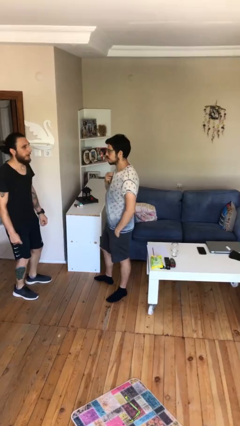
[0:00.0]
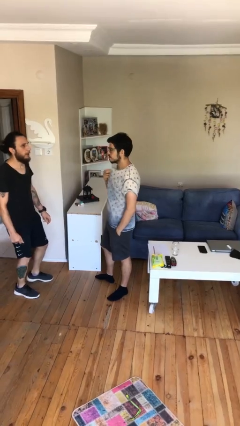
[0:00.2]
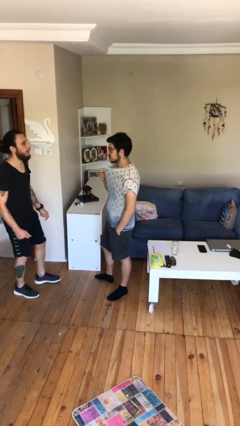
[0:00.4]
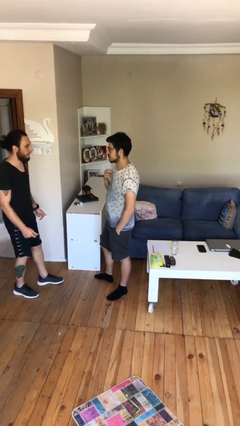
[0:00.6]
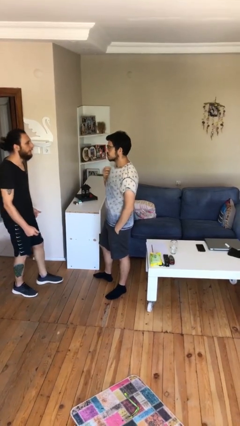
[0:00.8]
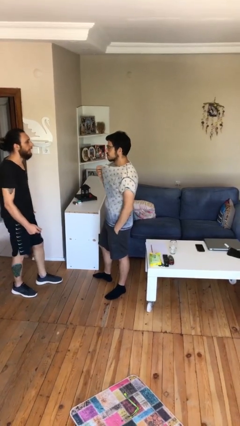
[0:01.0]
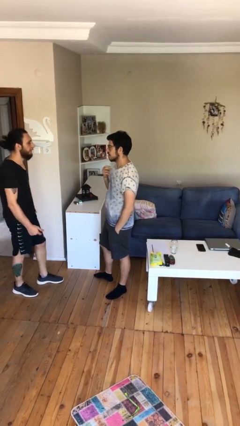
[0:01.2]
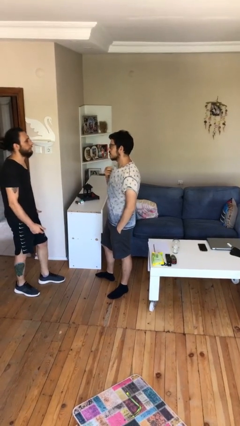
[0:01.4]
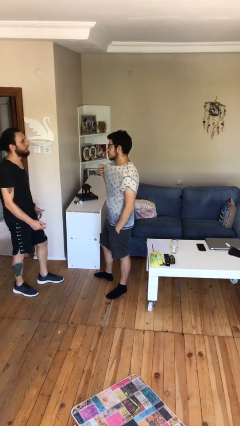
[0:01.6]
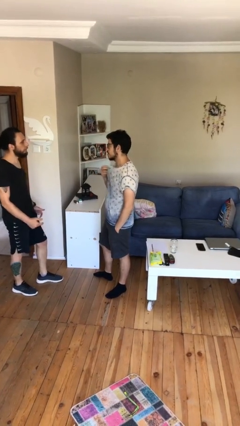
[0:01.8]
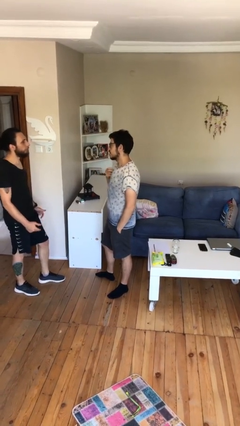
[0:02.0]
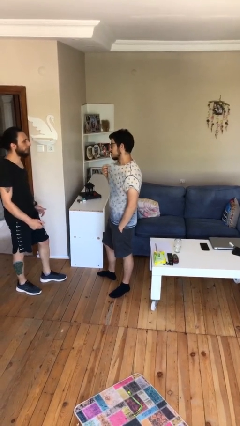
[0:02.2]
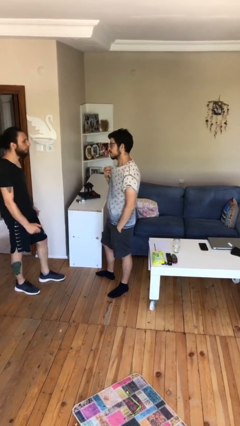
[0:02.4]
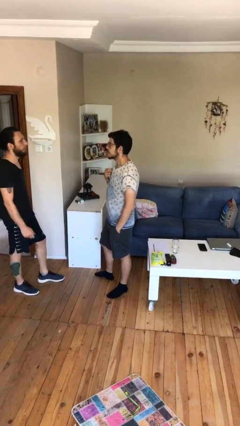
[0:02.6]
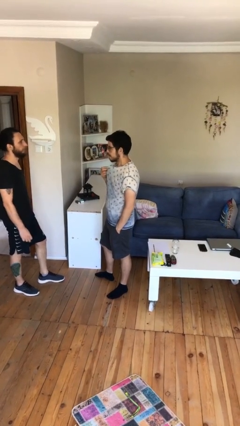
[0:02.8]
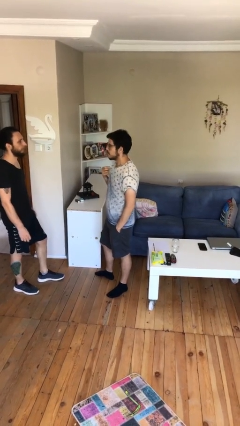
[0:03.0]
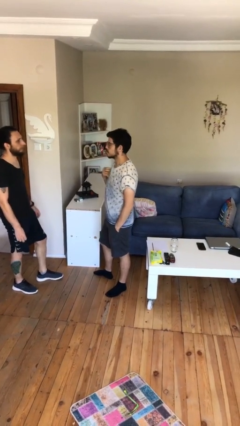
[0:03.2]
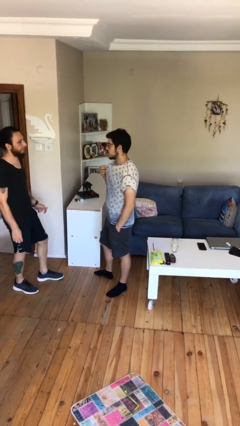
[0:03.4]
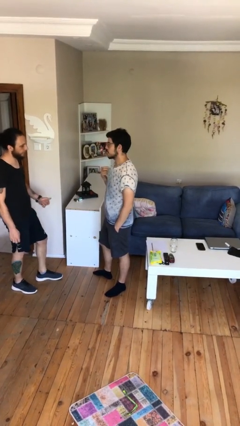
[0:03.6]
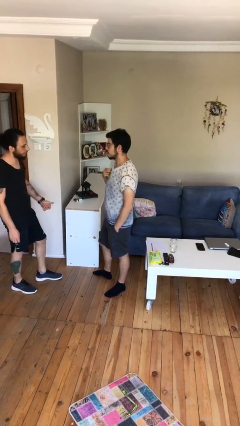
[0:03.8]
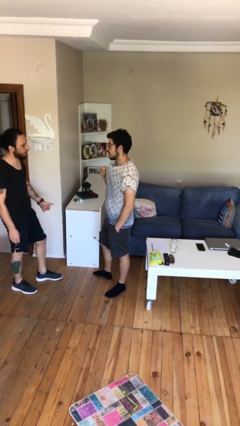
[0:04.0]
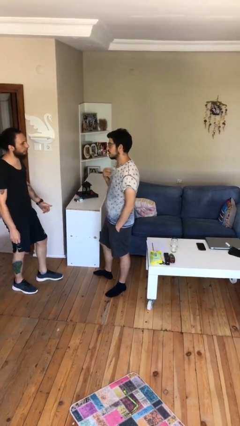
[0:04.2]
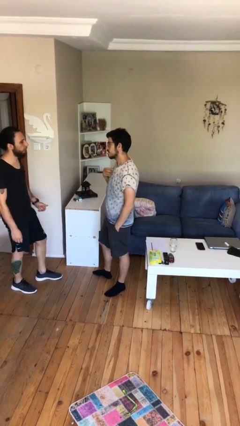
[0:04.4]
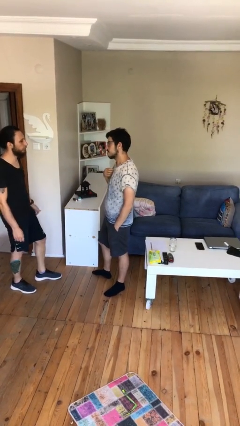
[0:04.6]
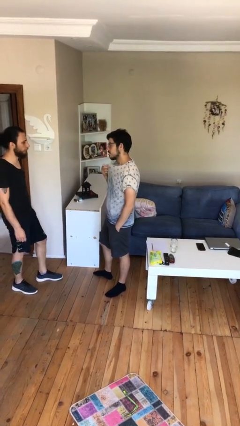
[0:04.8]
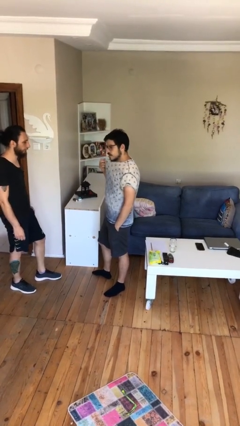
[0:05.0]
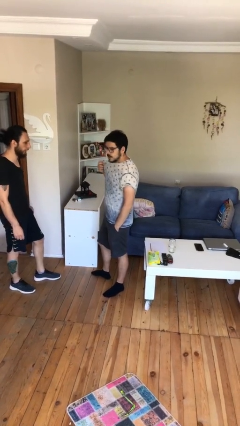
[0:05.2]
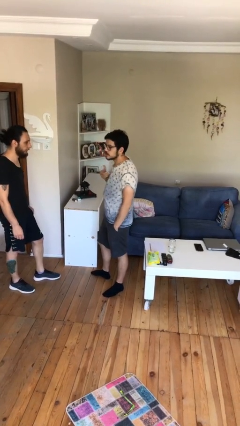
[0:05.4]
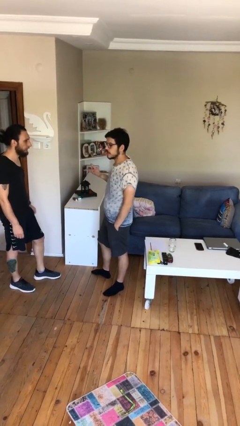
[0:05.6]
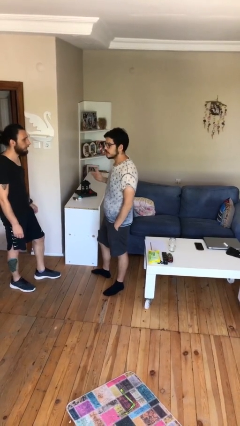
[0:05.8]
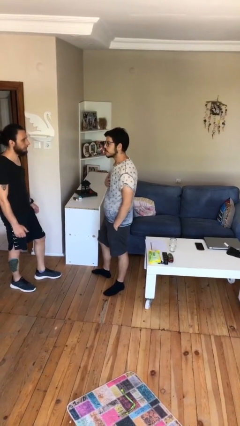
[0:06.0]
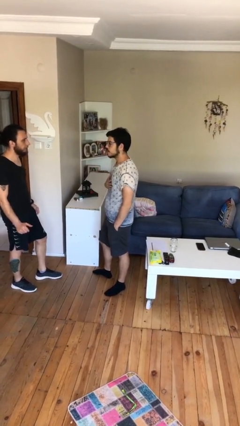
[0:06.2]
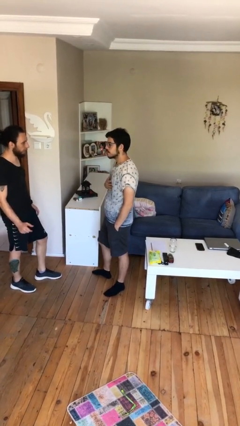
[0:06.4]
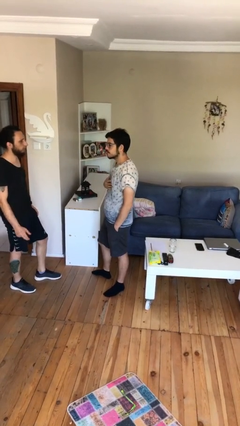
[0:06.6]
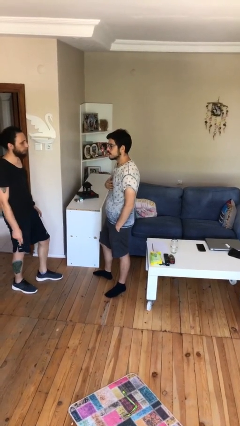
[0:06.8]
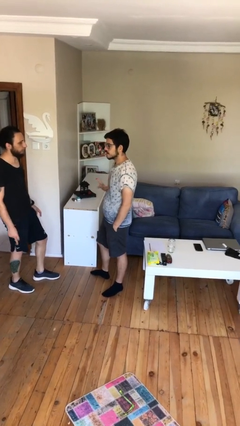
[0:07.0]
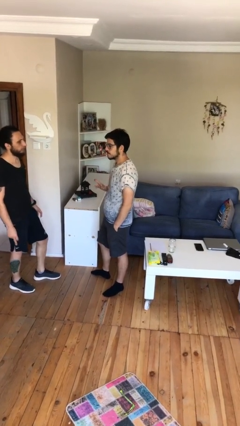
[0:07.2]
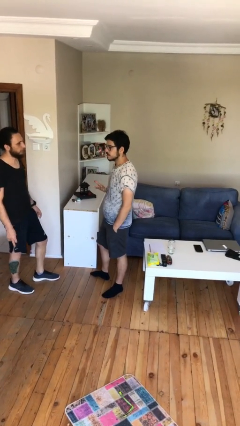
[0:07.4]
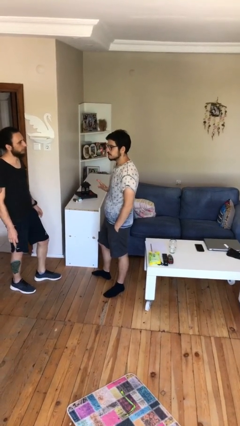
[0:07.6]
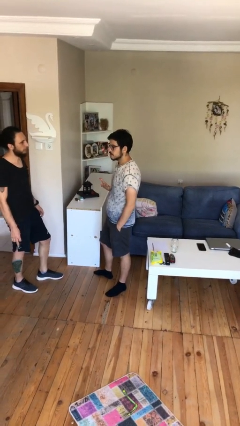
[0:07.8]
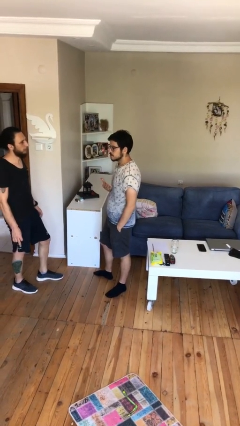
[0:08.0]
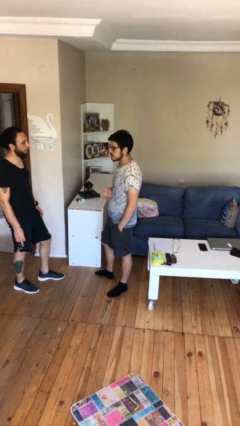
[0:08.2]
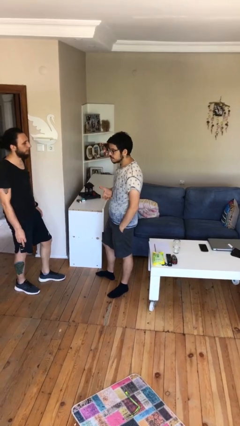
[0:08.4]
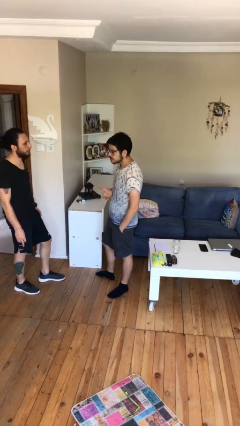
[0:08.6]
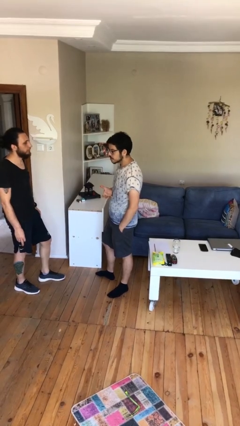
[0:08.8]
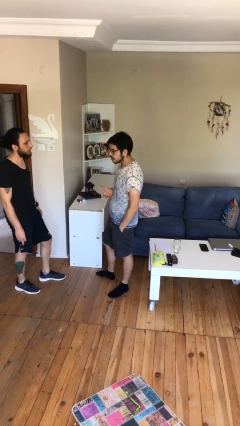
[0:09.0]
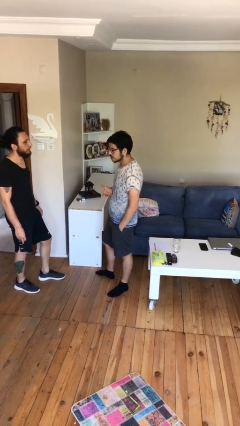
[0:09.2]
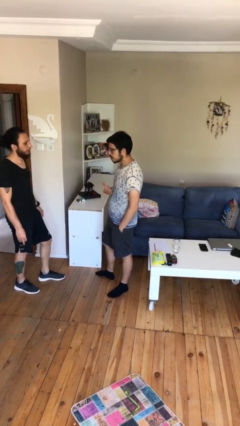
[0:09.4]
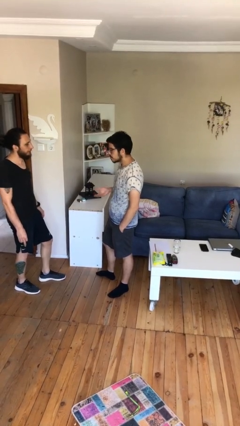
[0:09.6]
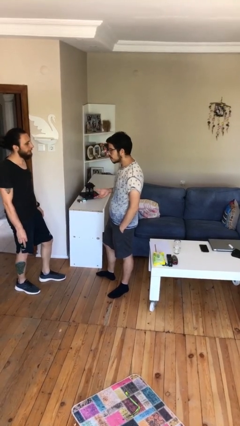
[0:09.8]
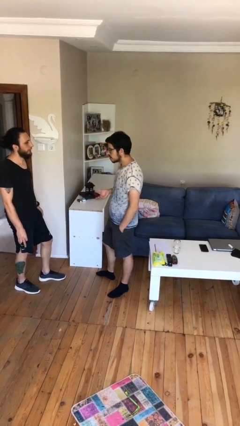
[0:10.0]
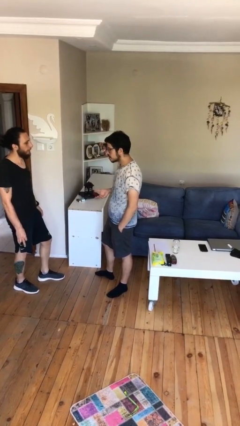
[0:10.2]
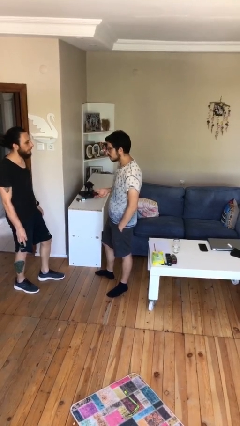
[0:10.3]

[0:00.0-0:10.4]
person talks to person

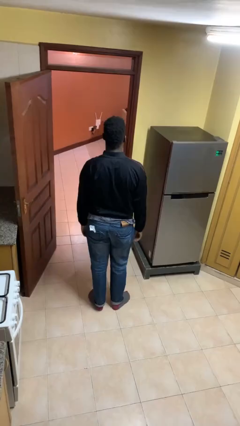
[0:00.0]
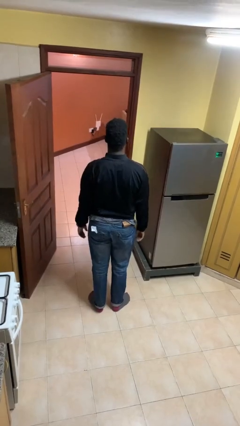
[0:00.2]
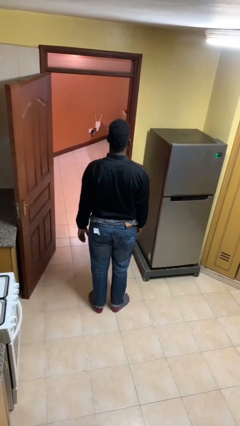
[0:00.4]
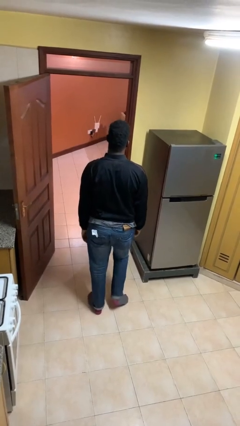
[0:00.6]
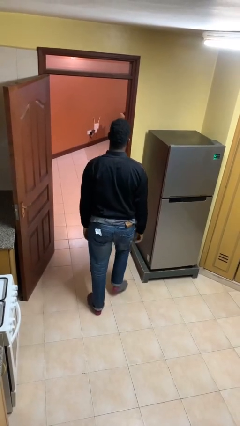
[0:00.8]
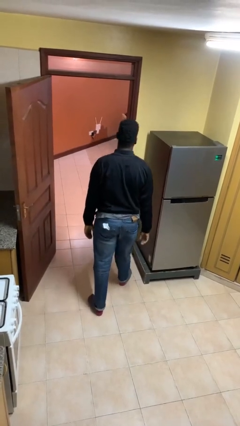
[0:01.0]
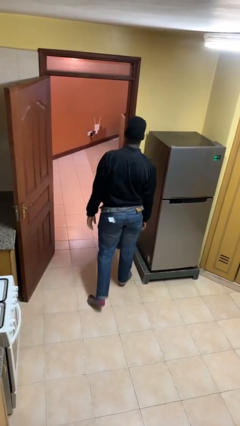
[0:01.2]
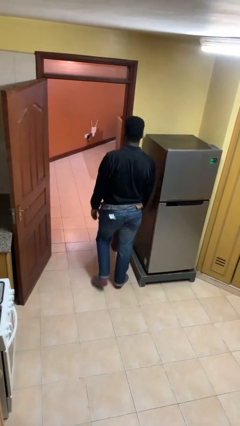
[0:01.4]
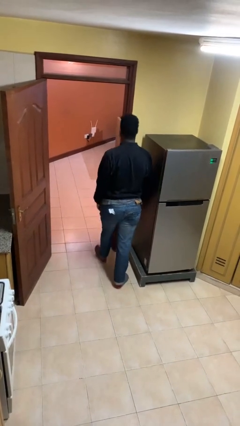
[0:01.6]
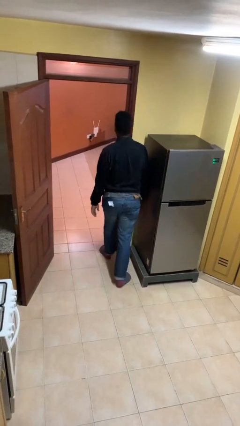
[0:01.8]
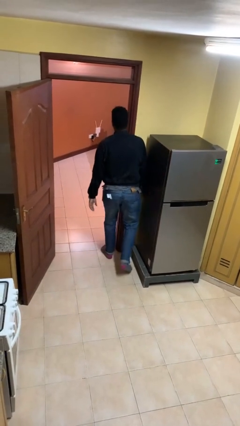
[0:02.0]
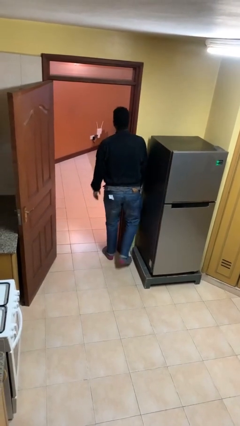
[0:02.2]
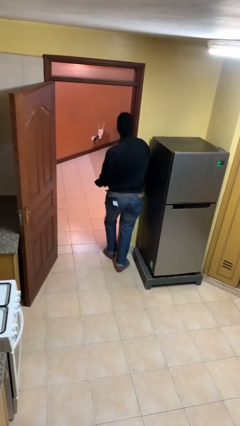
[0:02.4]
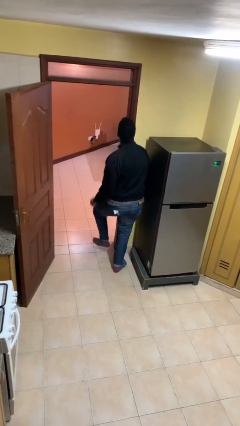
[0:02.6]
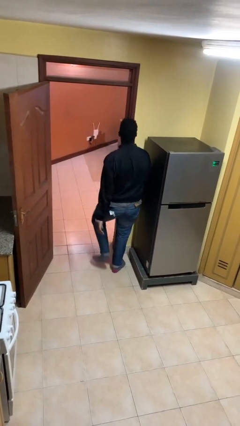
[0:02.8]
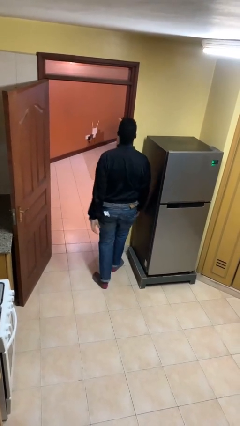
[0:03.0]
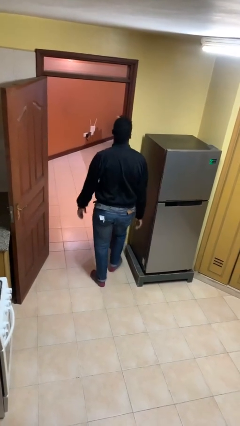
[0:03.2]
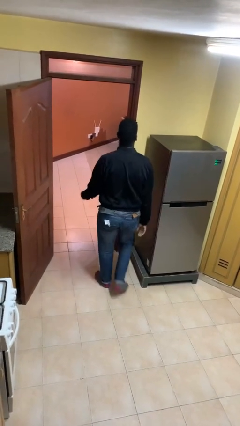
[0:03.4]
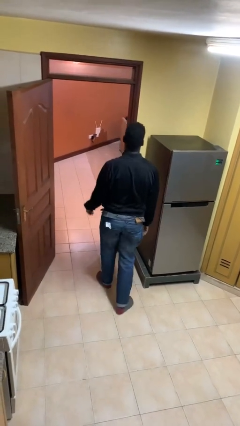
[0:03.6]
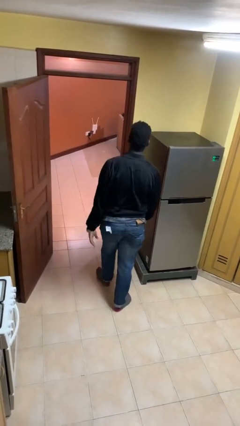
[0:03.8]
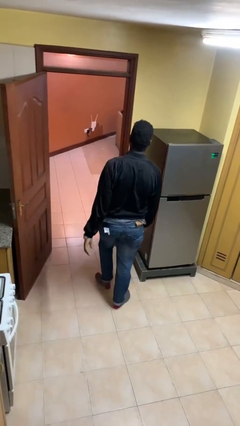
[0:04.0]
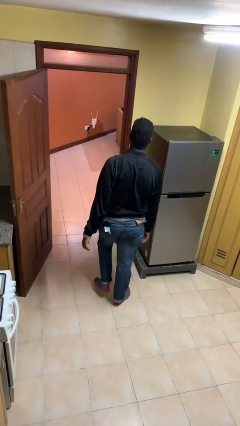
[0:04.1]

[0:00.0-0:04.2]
person bumps into wall

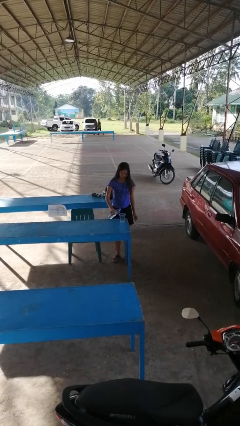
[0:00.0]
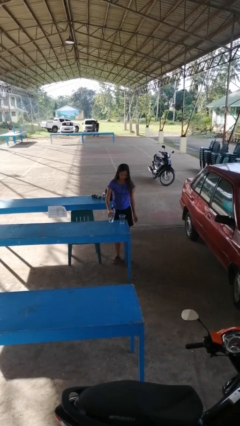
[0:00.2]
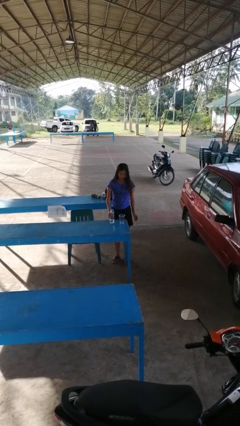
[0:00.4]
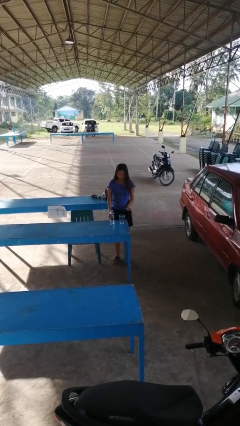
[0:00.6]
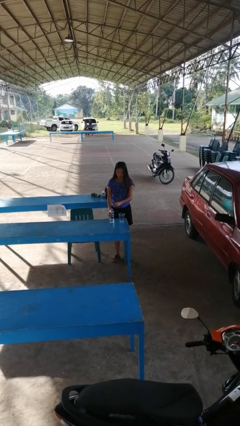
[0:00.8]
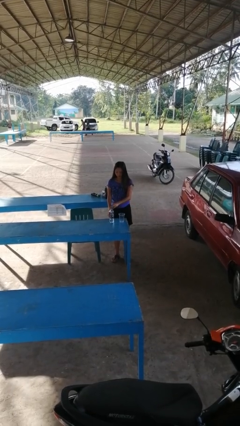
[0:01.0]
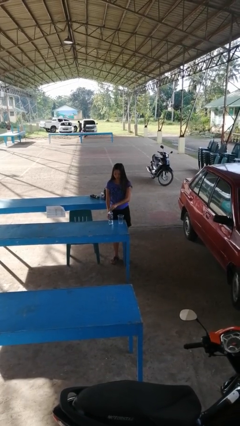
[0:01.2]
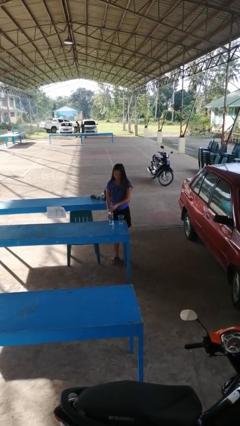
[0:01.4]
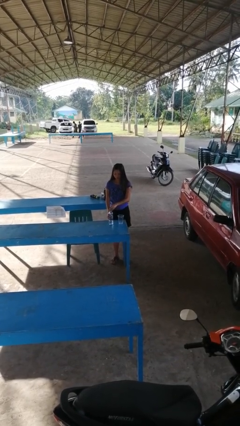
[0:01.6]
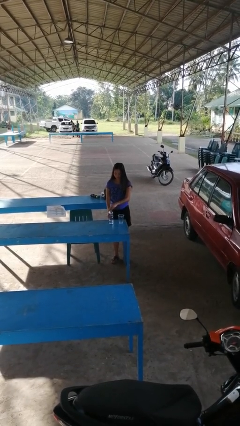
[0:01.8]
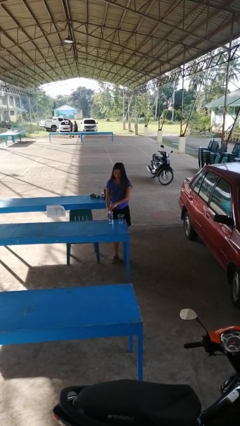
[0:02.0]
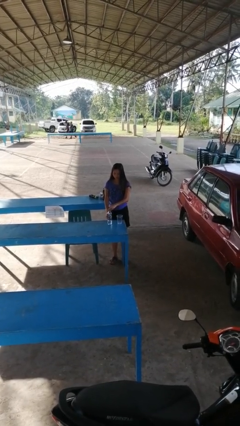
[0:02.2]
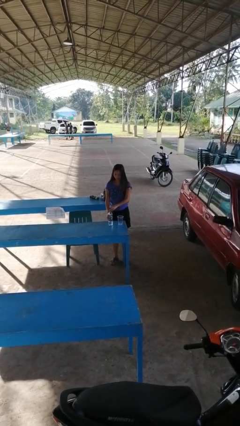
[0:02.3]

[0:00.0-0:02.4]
person screws lid to bottle

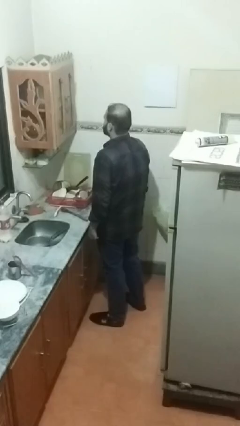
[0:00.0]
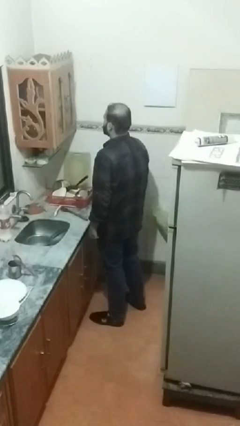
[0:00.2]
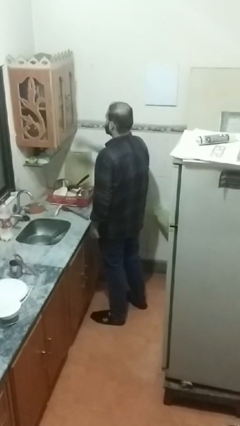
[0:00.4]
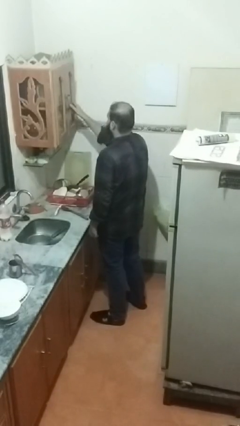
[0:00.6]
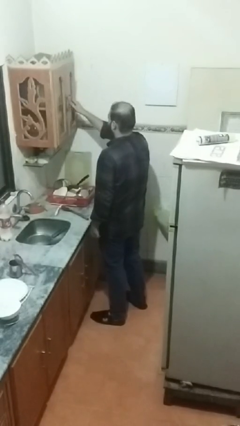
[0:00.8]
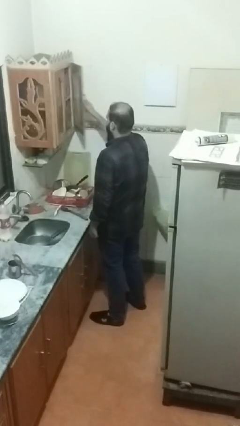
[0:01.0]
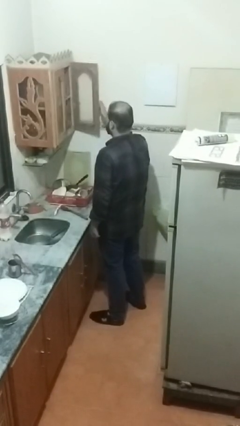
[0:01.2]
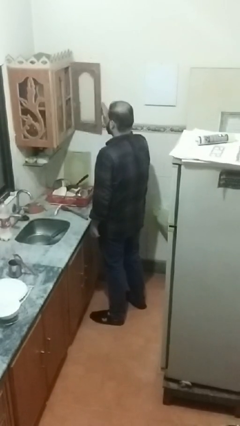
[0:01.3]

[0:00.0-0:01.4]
person opens kitchen drawer
